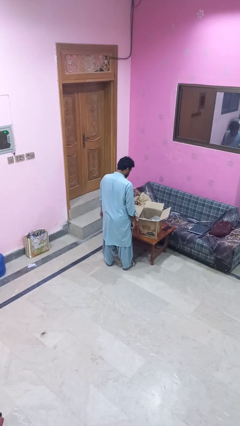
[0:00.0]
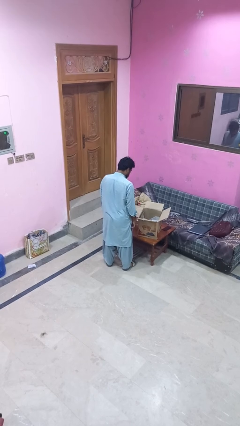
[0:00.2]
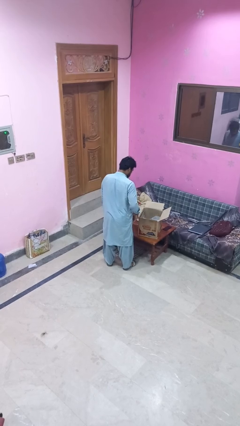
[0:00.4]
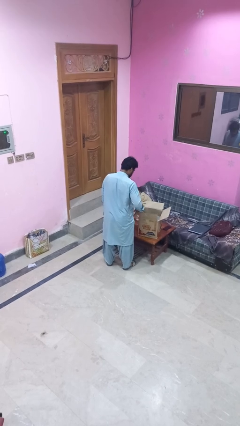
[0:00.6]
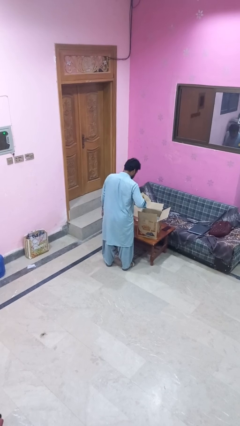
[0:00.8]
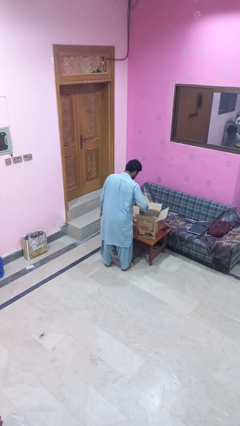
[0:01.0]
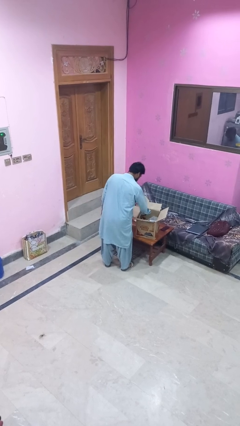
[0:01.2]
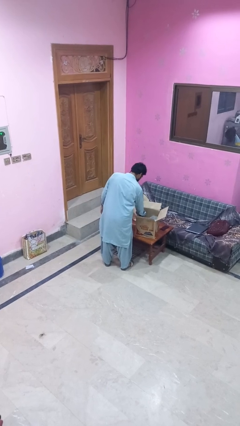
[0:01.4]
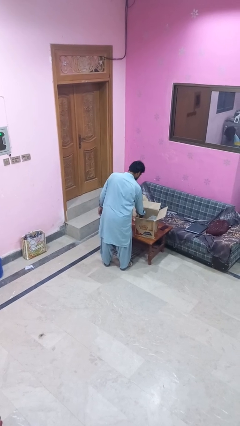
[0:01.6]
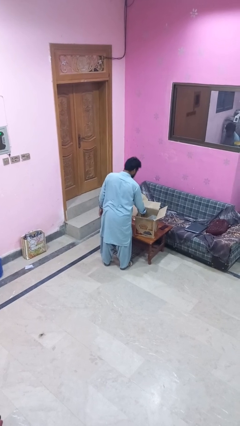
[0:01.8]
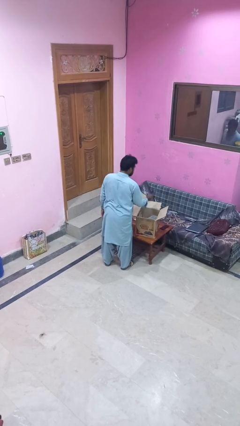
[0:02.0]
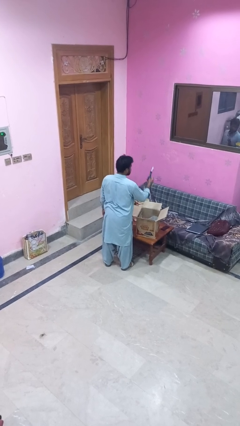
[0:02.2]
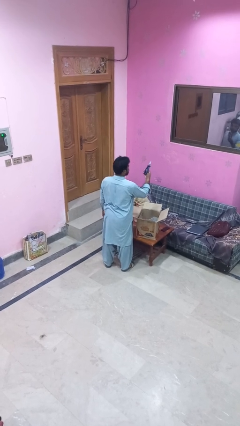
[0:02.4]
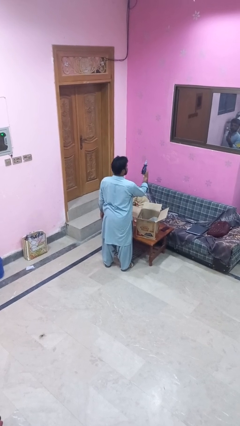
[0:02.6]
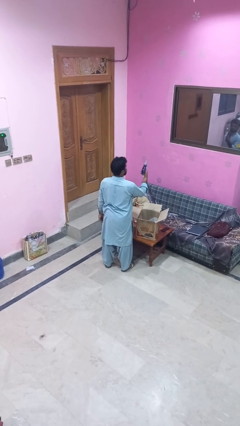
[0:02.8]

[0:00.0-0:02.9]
person takes object from box

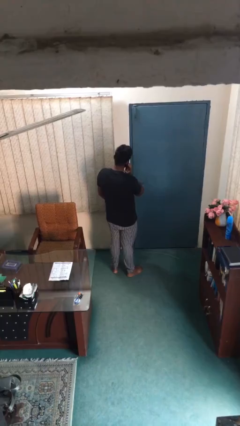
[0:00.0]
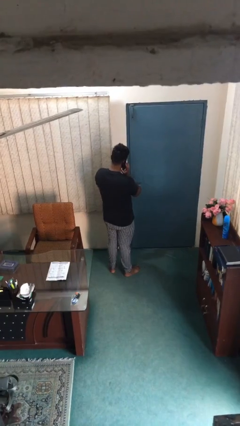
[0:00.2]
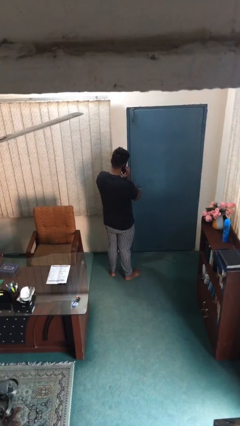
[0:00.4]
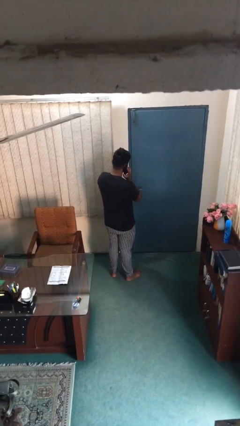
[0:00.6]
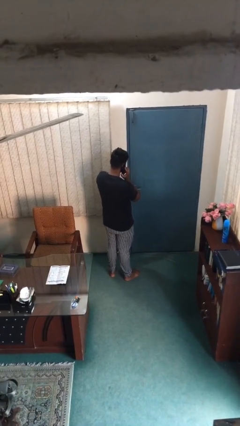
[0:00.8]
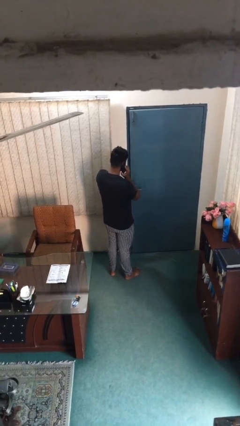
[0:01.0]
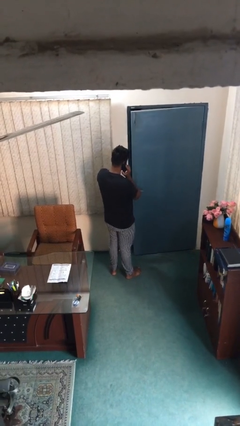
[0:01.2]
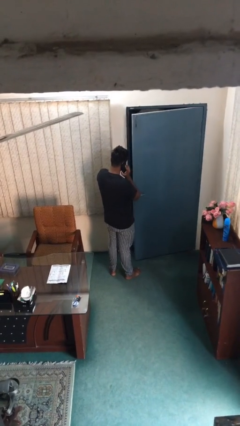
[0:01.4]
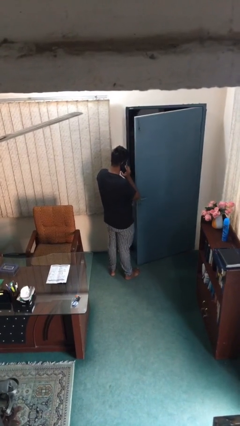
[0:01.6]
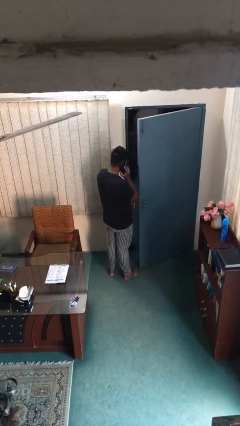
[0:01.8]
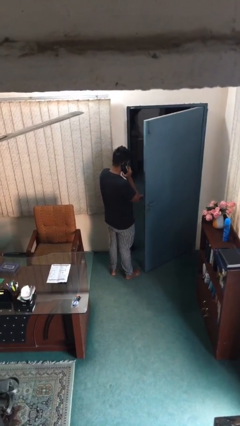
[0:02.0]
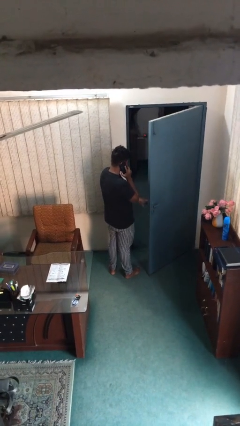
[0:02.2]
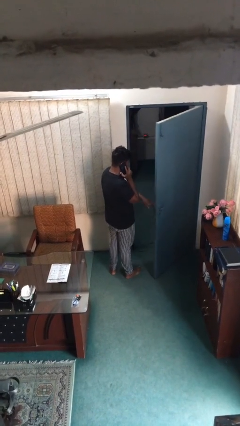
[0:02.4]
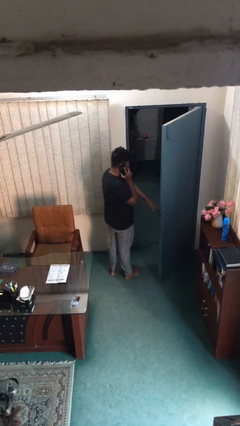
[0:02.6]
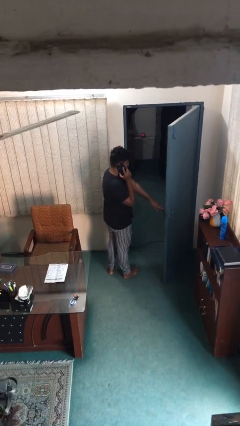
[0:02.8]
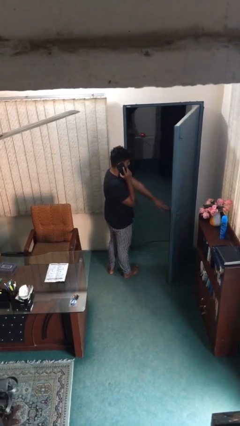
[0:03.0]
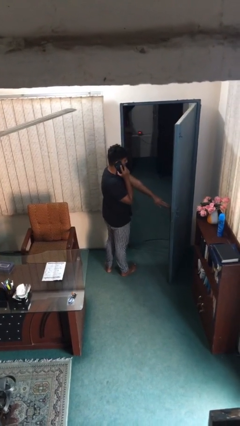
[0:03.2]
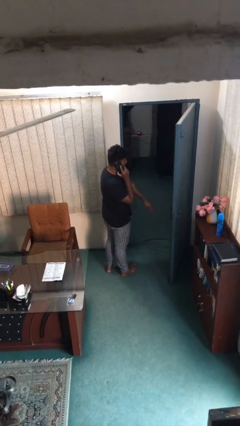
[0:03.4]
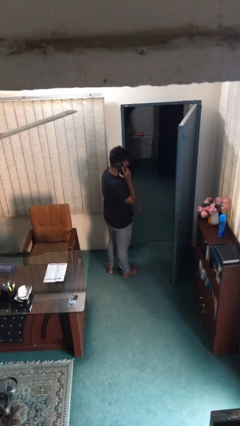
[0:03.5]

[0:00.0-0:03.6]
person opens facility door

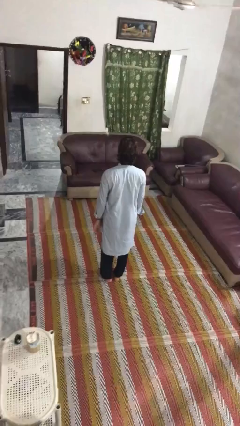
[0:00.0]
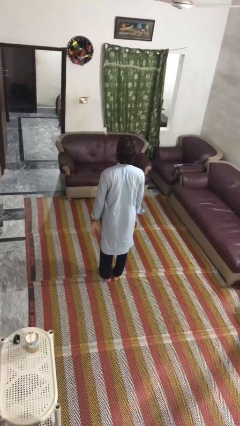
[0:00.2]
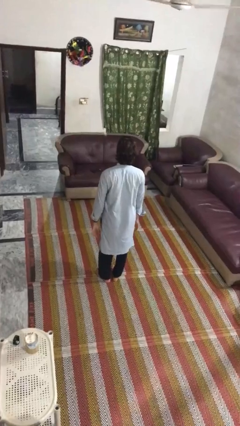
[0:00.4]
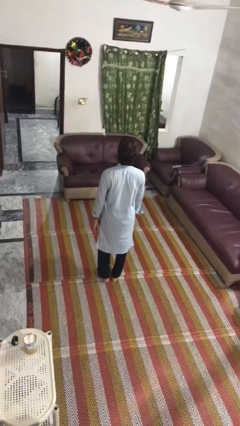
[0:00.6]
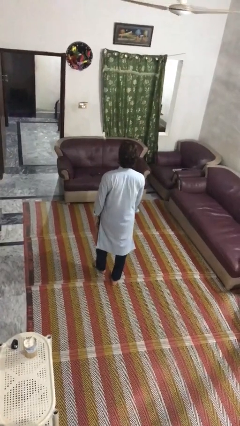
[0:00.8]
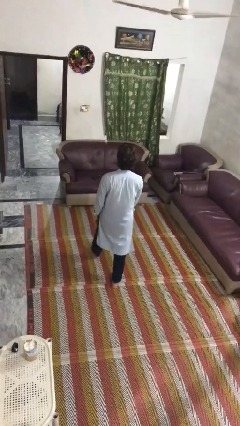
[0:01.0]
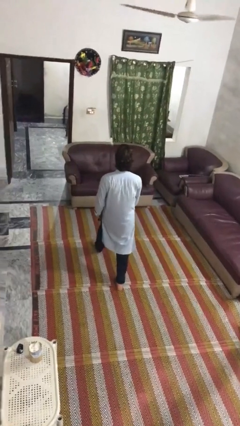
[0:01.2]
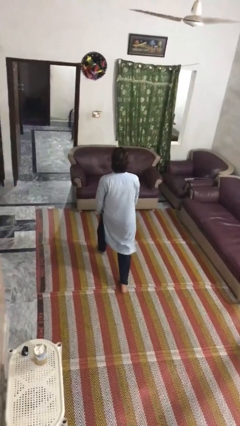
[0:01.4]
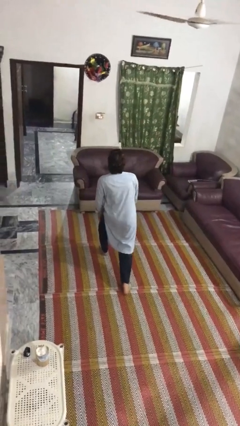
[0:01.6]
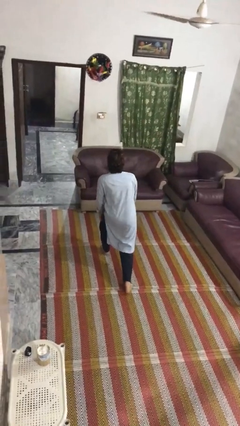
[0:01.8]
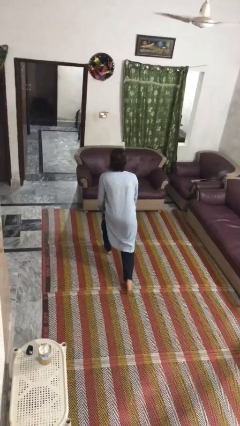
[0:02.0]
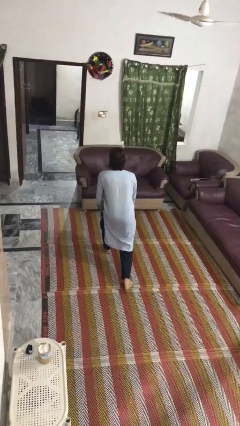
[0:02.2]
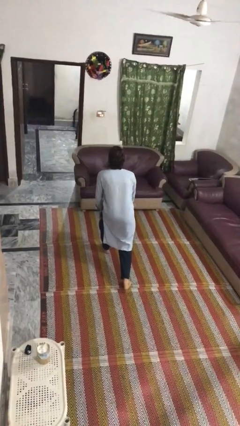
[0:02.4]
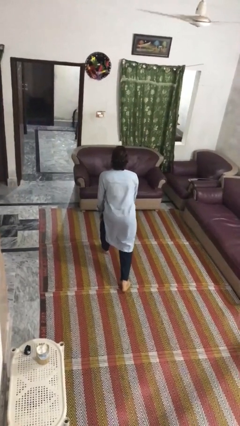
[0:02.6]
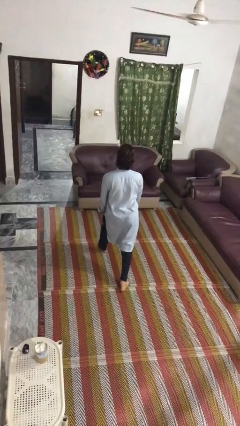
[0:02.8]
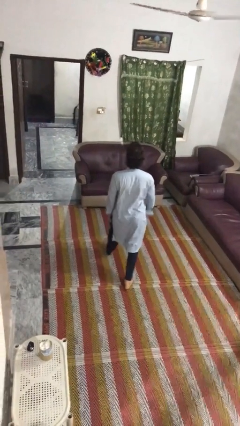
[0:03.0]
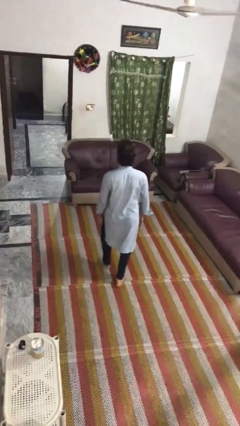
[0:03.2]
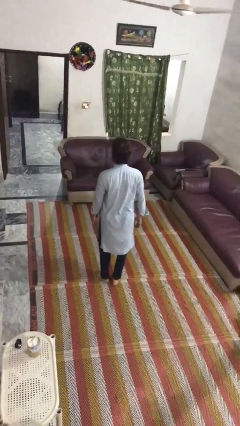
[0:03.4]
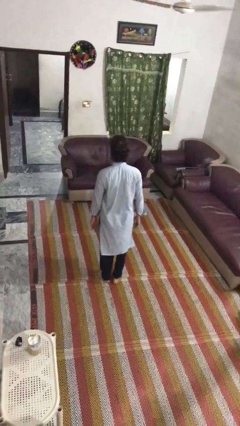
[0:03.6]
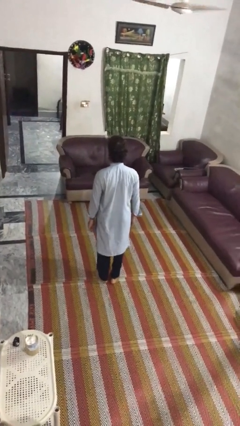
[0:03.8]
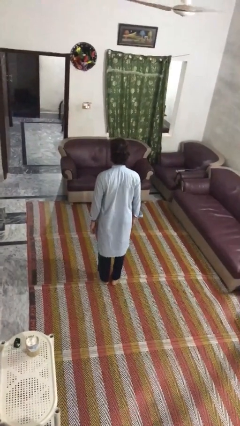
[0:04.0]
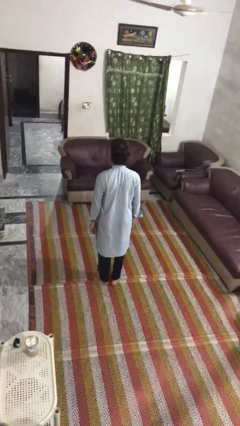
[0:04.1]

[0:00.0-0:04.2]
person exercises with lunges

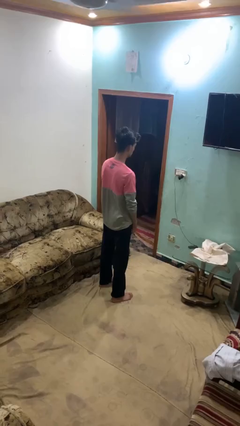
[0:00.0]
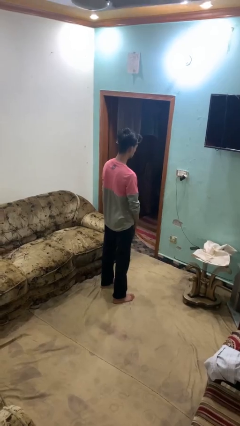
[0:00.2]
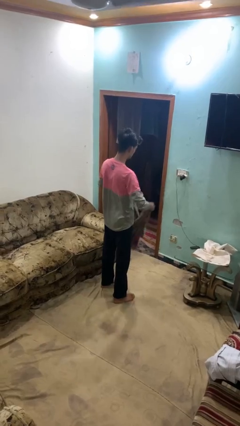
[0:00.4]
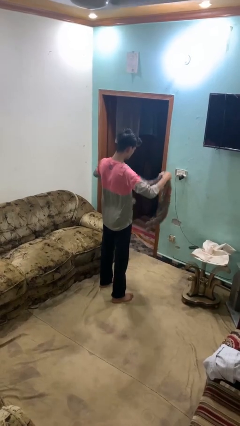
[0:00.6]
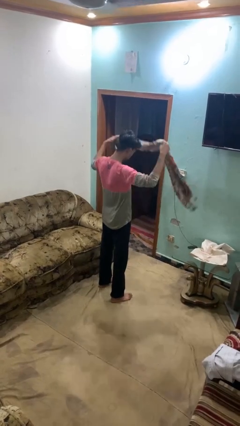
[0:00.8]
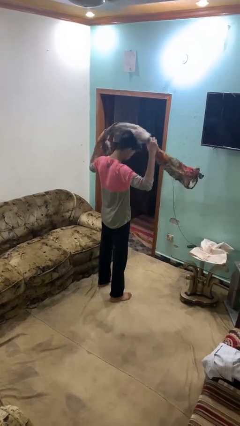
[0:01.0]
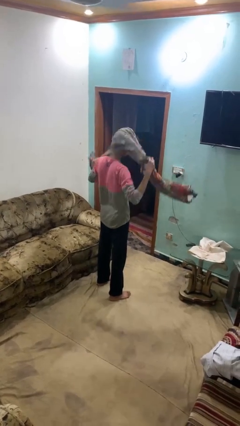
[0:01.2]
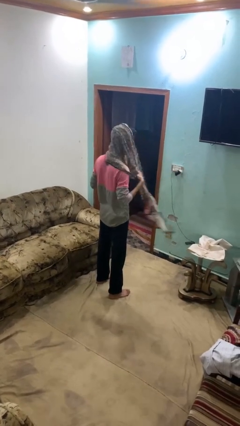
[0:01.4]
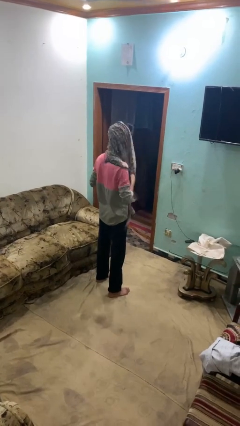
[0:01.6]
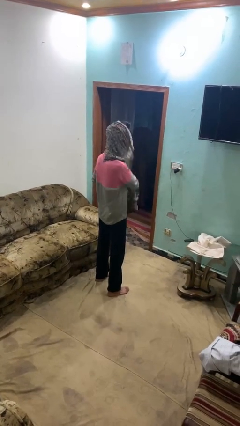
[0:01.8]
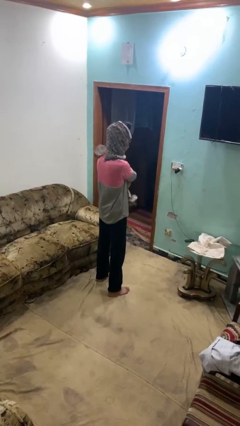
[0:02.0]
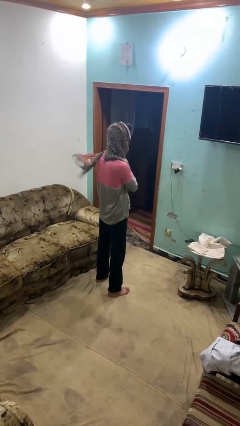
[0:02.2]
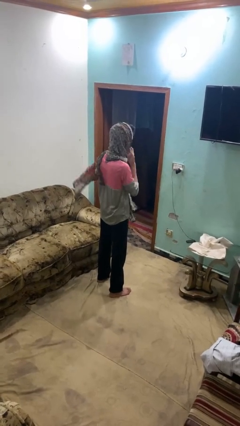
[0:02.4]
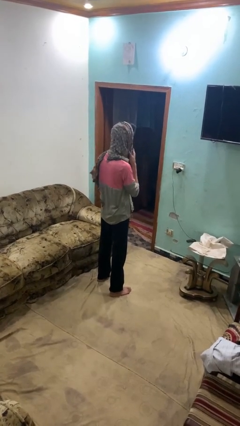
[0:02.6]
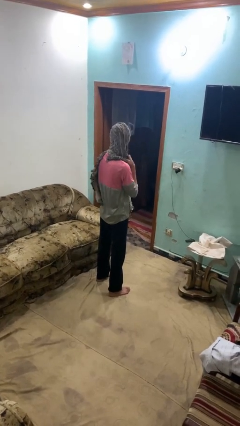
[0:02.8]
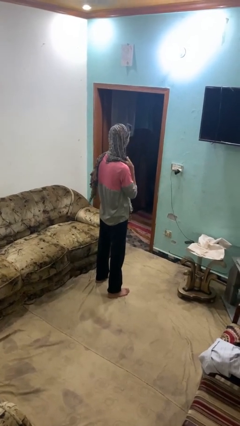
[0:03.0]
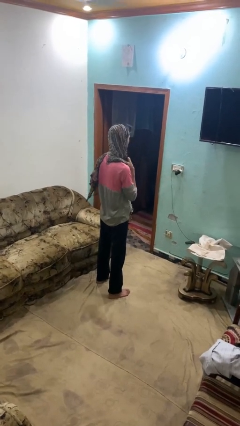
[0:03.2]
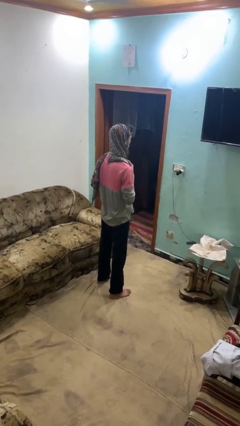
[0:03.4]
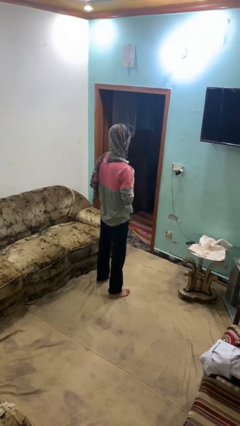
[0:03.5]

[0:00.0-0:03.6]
person puts on scarf

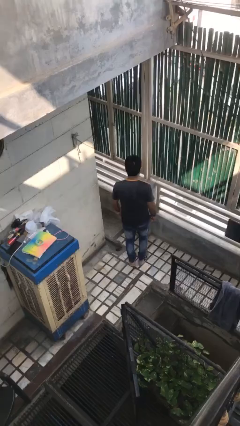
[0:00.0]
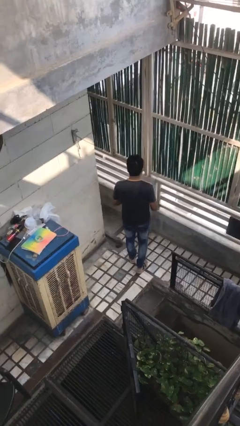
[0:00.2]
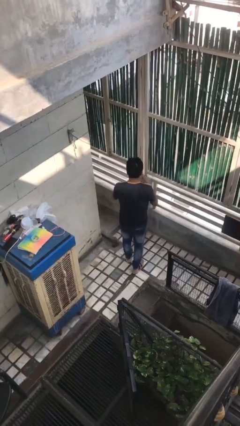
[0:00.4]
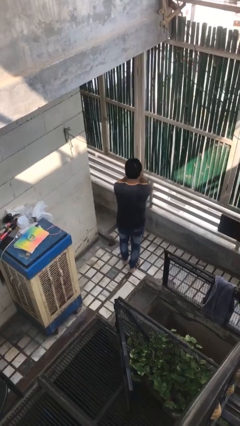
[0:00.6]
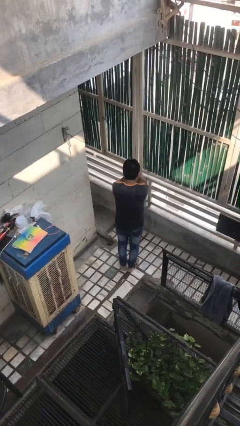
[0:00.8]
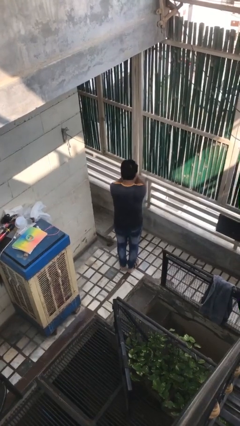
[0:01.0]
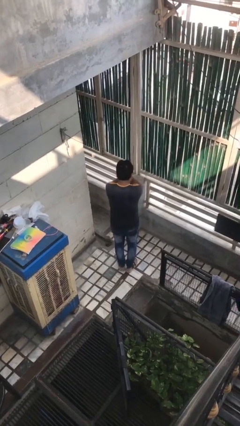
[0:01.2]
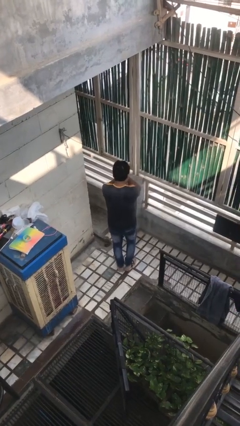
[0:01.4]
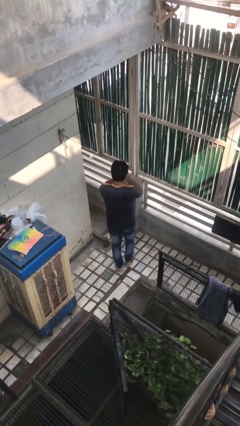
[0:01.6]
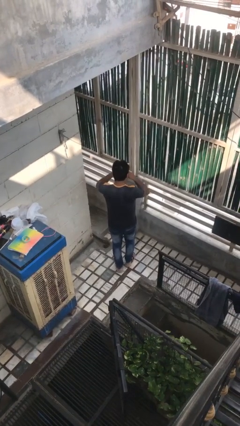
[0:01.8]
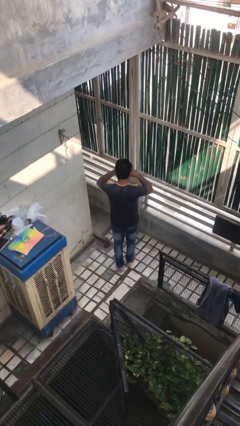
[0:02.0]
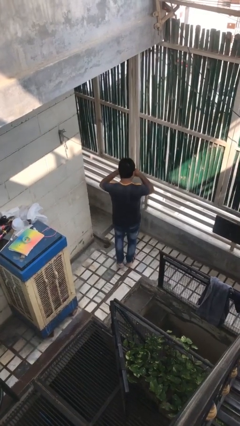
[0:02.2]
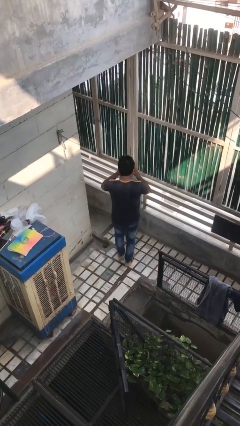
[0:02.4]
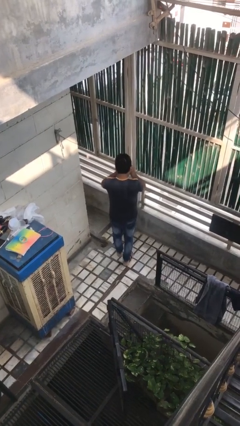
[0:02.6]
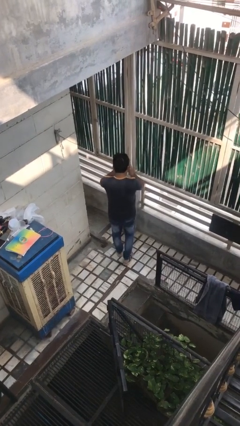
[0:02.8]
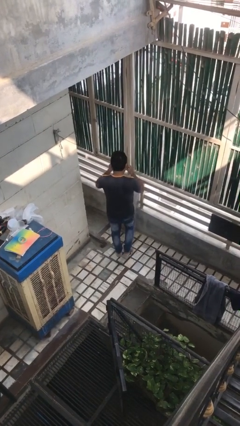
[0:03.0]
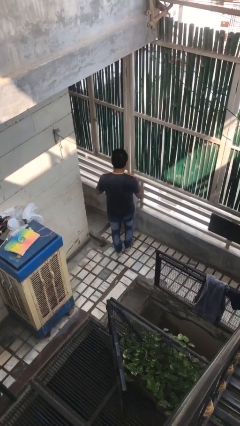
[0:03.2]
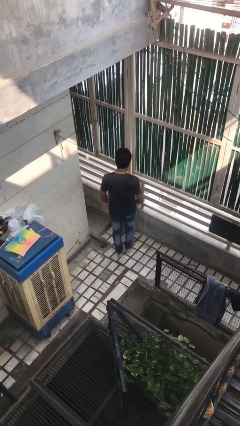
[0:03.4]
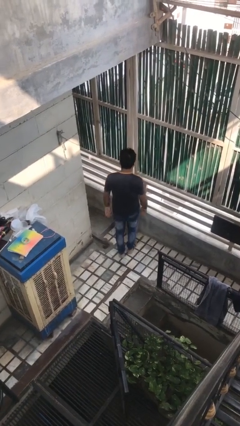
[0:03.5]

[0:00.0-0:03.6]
person rubs eyes
